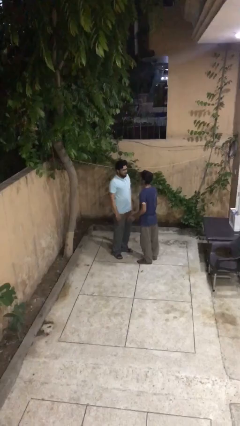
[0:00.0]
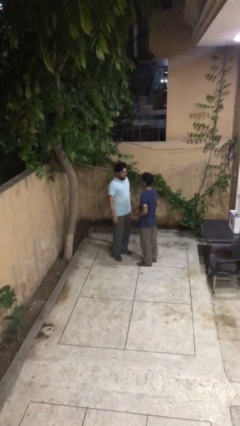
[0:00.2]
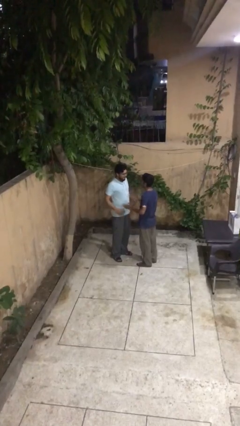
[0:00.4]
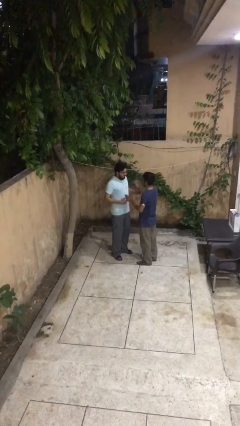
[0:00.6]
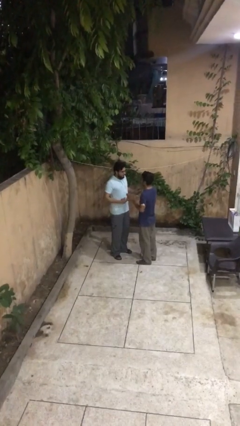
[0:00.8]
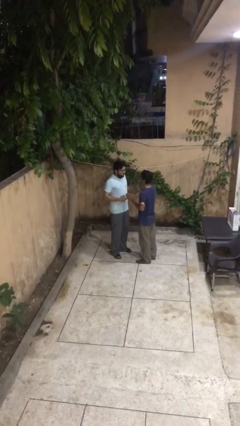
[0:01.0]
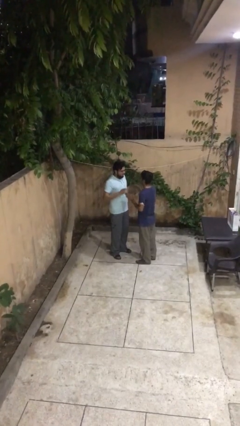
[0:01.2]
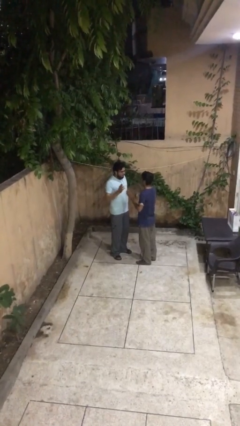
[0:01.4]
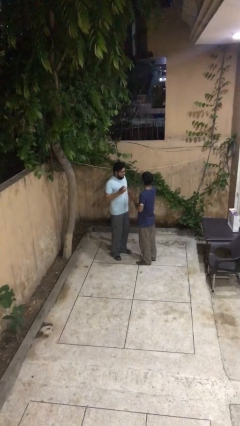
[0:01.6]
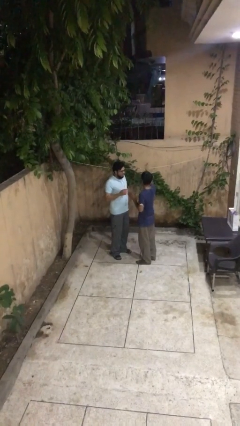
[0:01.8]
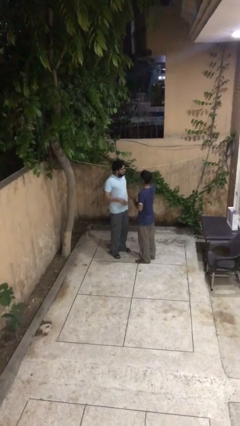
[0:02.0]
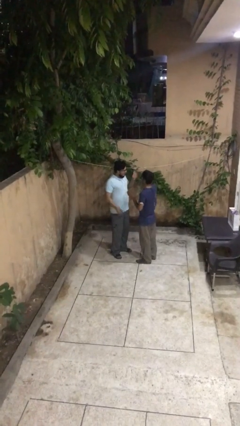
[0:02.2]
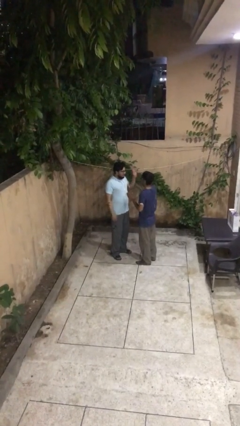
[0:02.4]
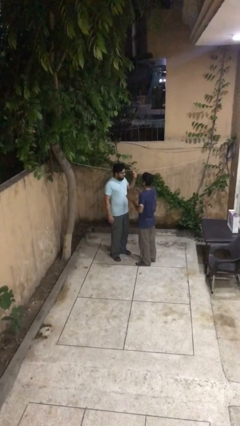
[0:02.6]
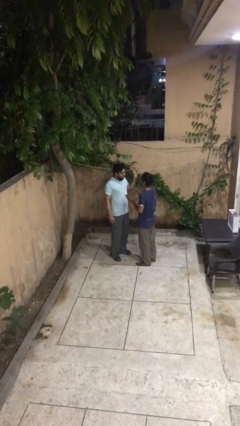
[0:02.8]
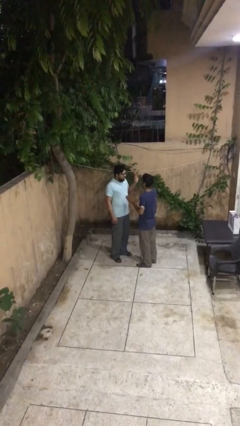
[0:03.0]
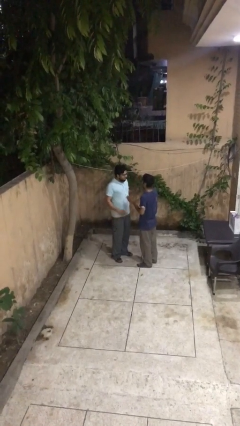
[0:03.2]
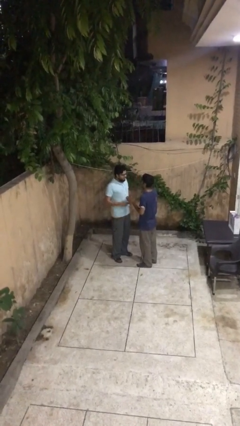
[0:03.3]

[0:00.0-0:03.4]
person talks to person

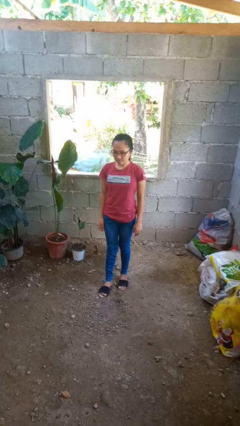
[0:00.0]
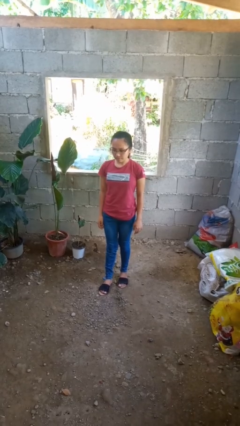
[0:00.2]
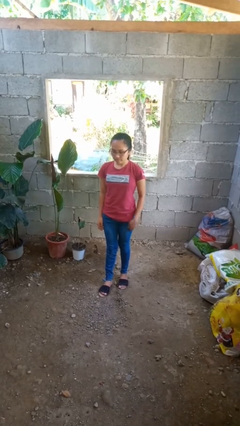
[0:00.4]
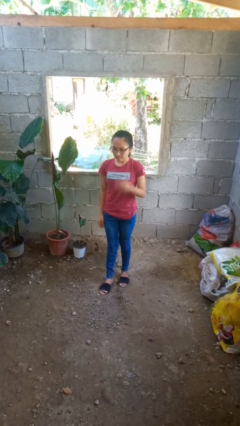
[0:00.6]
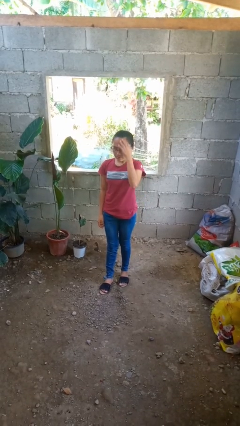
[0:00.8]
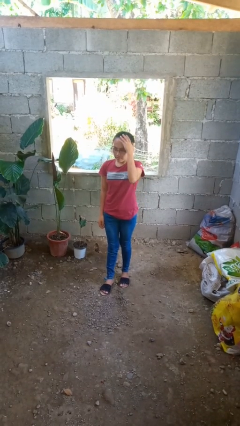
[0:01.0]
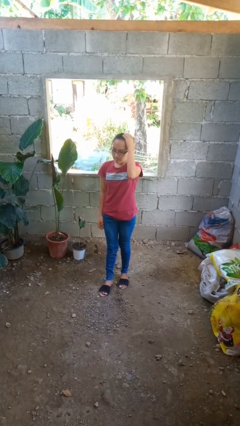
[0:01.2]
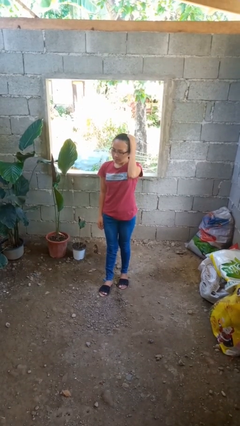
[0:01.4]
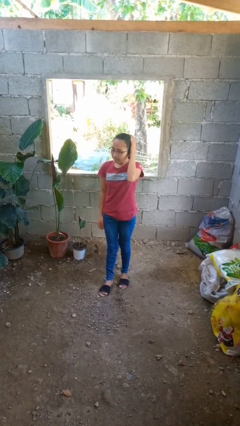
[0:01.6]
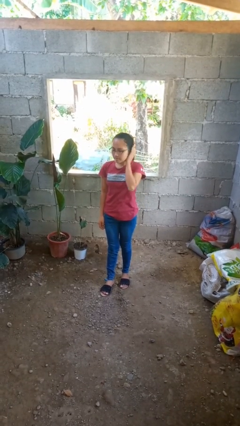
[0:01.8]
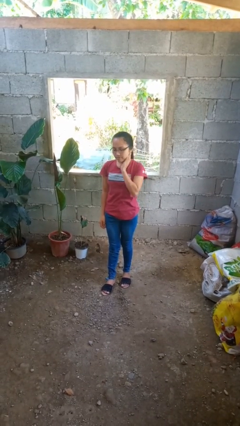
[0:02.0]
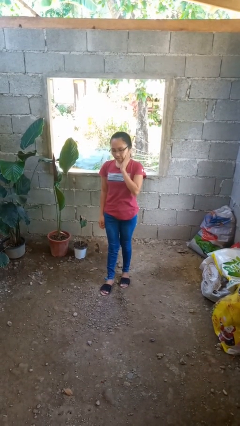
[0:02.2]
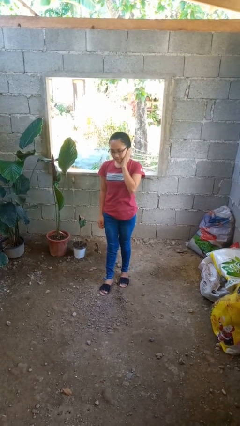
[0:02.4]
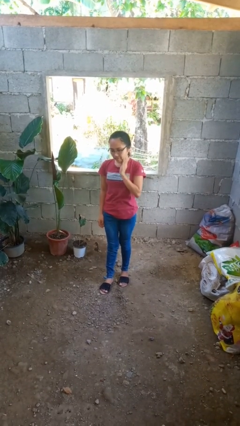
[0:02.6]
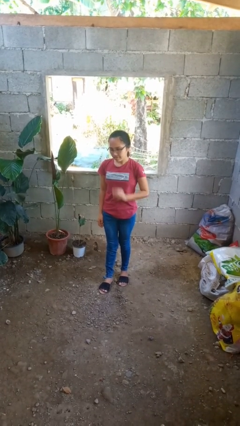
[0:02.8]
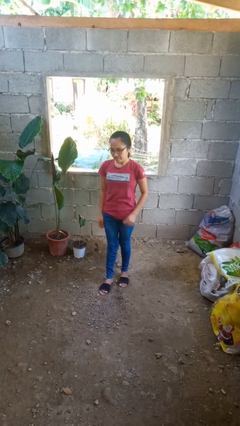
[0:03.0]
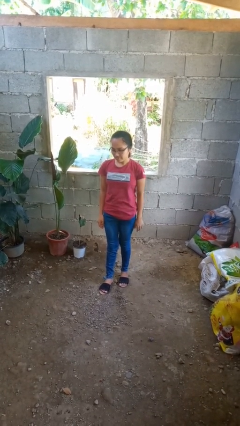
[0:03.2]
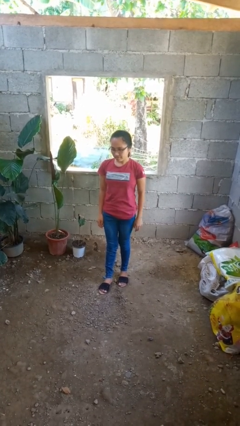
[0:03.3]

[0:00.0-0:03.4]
person scratches face

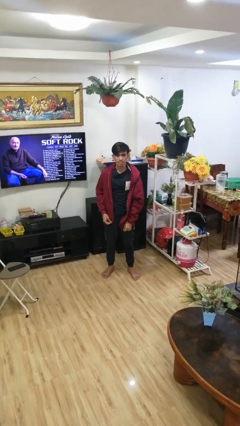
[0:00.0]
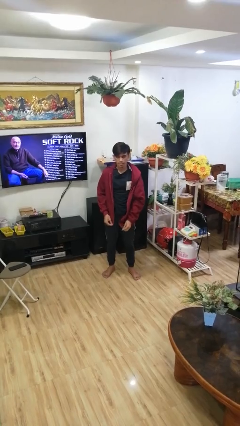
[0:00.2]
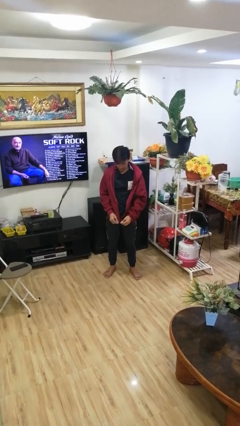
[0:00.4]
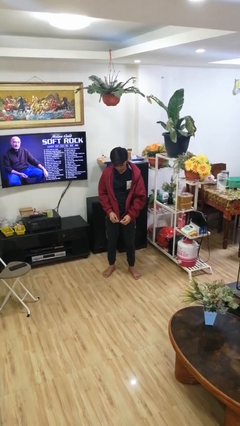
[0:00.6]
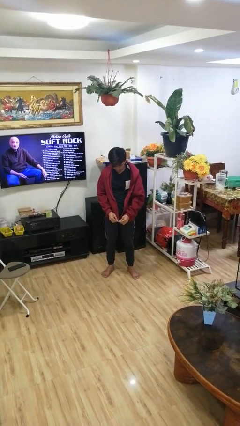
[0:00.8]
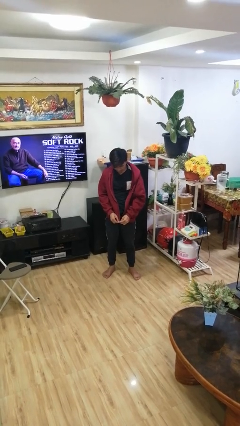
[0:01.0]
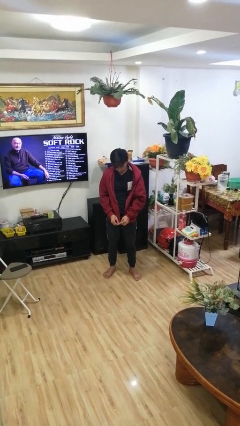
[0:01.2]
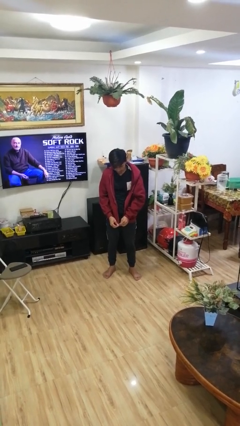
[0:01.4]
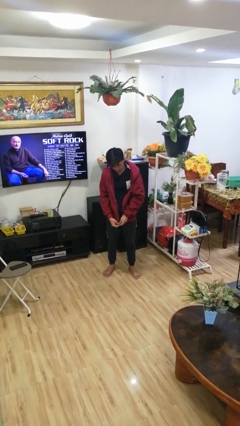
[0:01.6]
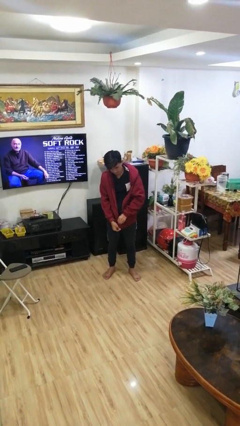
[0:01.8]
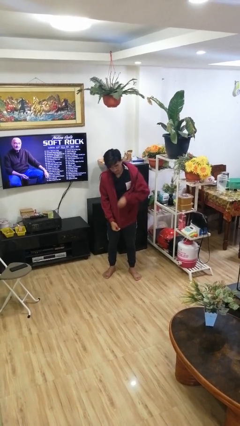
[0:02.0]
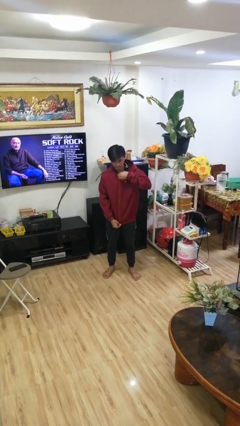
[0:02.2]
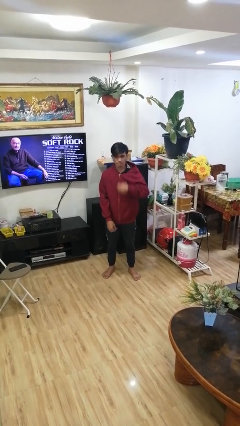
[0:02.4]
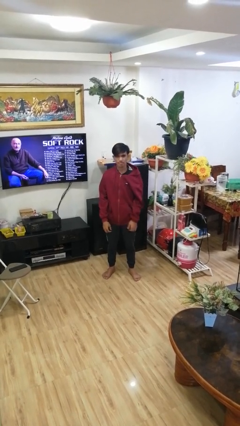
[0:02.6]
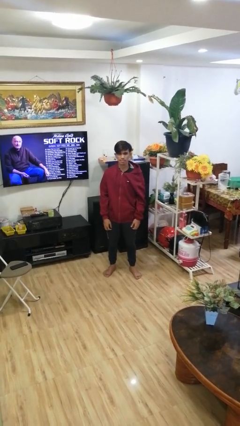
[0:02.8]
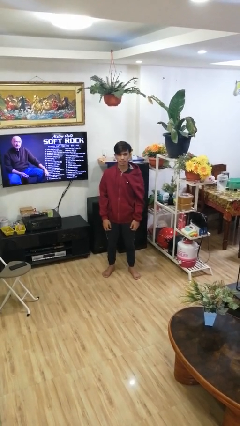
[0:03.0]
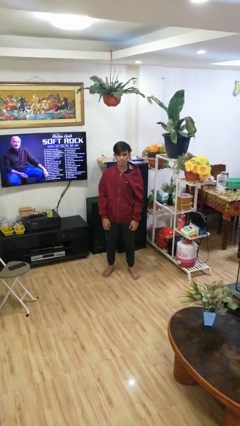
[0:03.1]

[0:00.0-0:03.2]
person zips up jacket

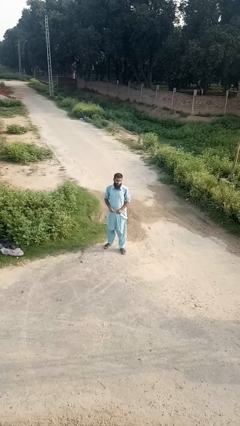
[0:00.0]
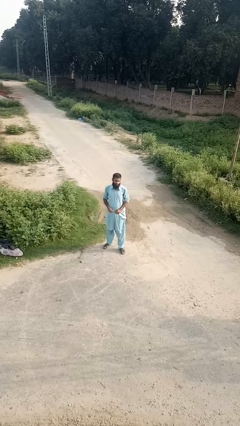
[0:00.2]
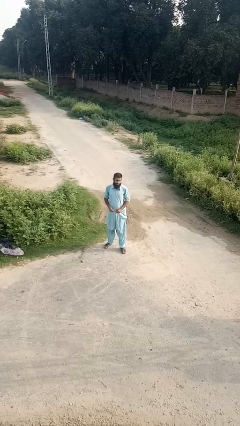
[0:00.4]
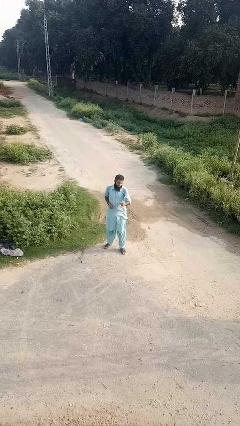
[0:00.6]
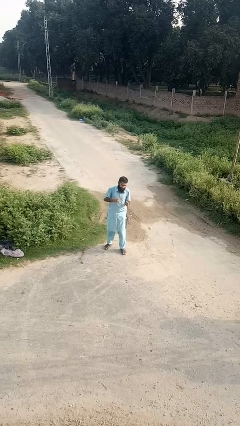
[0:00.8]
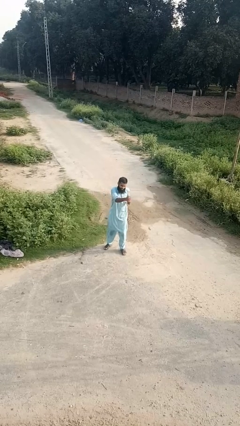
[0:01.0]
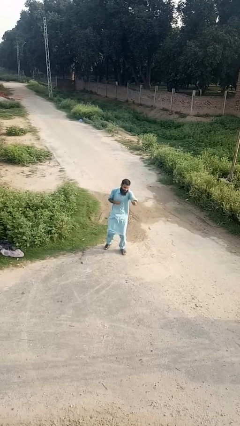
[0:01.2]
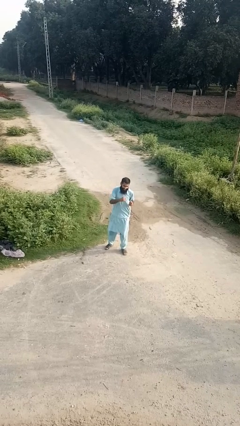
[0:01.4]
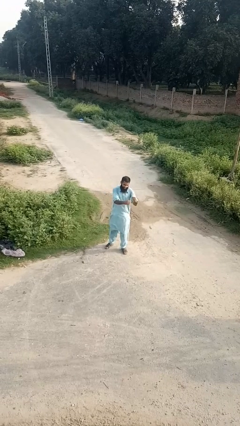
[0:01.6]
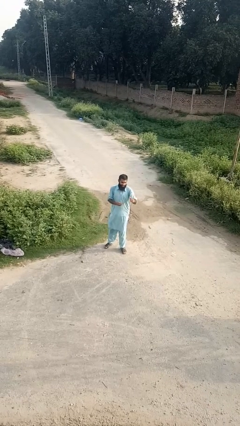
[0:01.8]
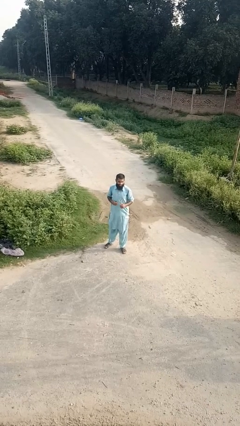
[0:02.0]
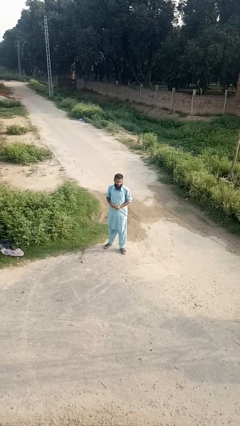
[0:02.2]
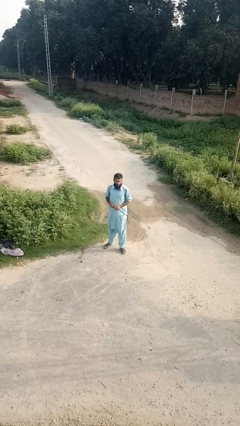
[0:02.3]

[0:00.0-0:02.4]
person punches

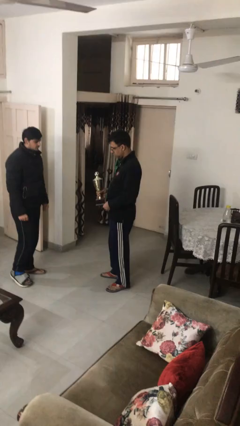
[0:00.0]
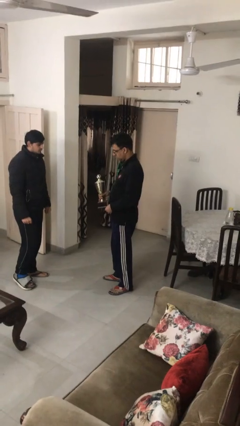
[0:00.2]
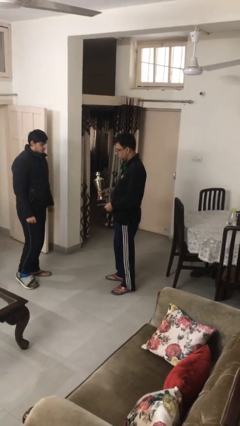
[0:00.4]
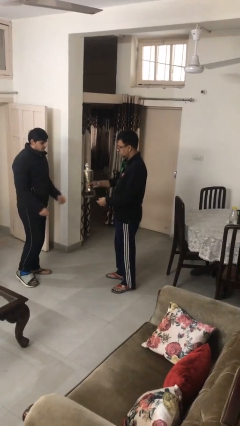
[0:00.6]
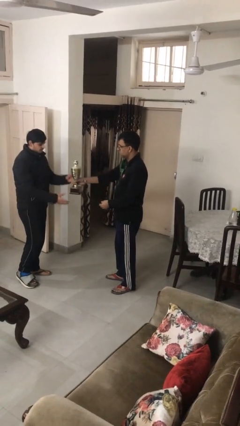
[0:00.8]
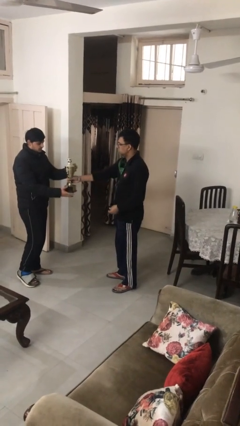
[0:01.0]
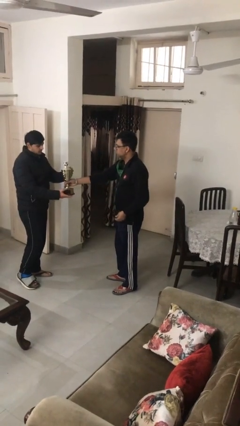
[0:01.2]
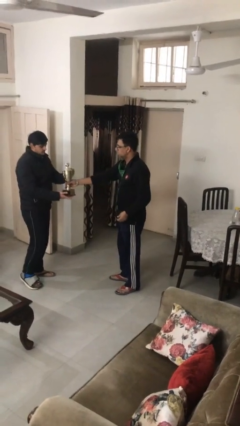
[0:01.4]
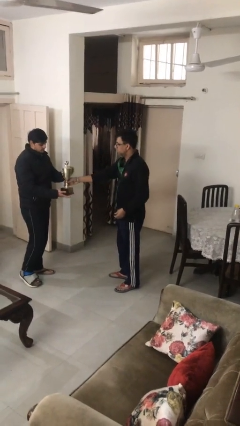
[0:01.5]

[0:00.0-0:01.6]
person transfers object to person

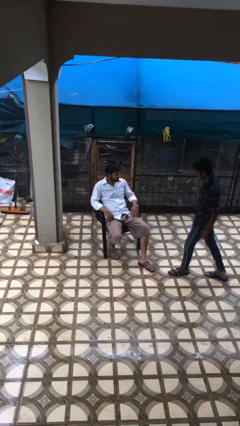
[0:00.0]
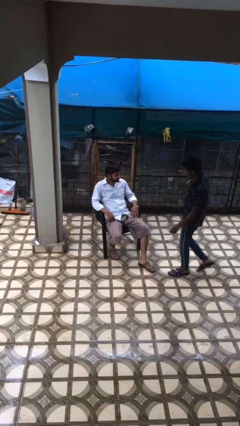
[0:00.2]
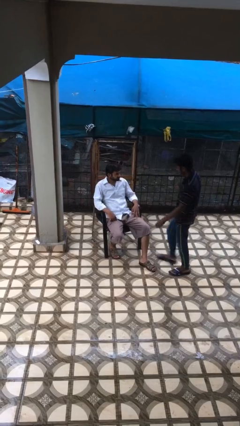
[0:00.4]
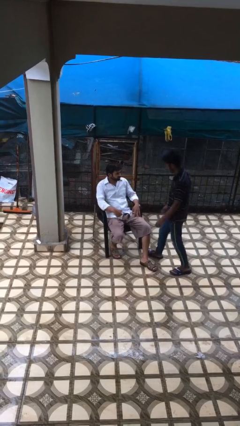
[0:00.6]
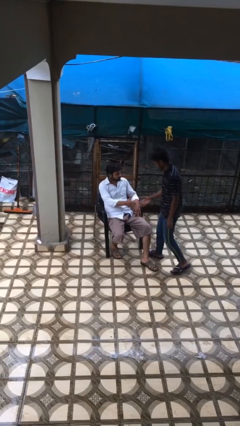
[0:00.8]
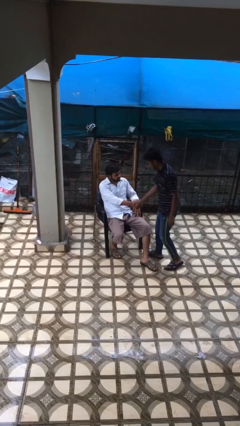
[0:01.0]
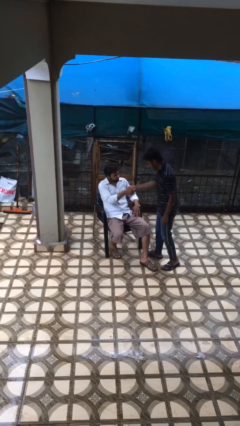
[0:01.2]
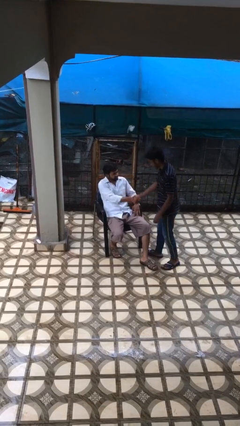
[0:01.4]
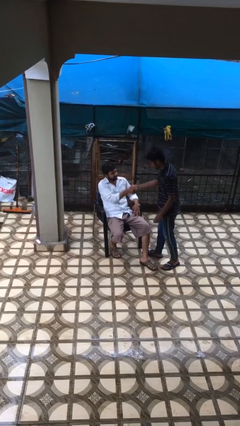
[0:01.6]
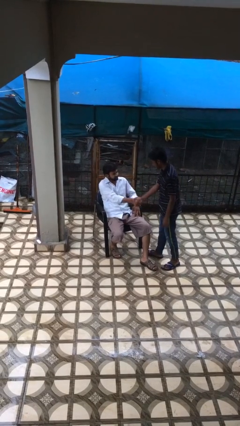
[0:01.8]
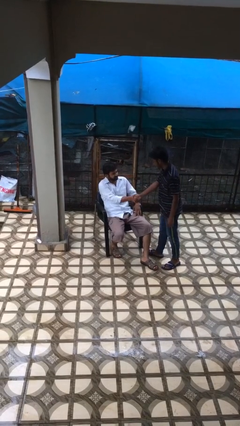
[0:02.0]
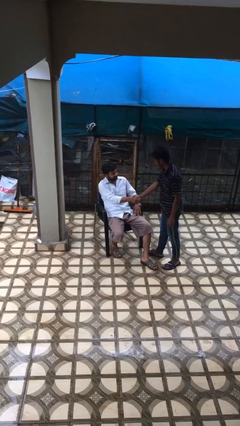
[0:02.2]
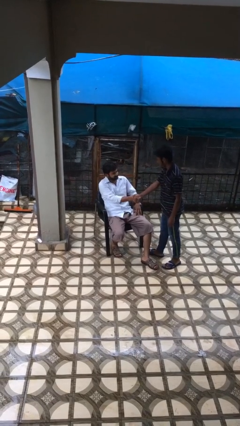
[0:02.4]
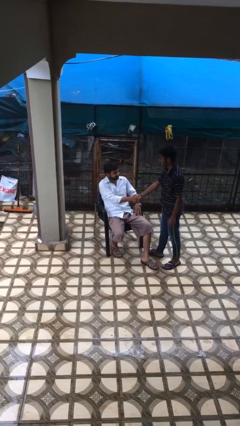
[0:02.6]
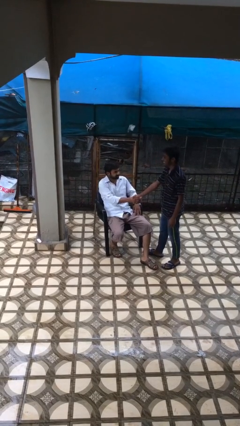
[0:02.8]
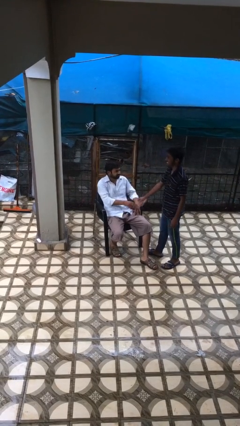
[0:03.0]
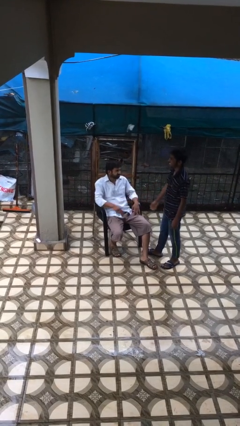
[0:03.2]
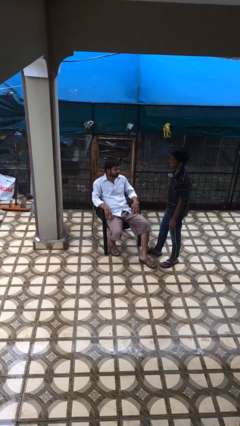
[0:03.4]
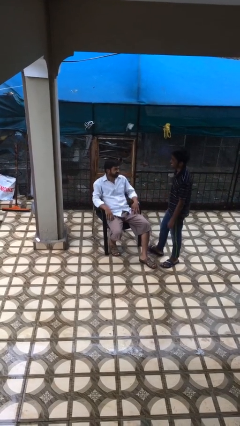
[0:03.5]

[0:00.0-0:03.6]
person shakes hand
